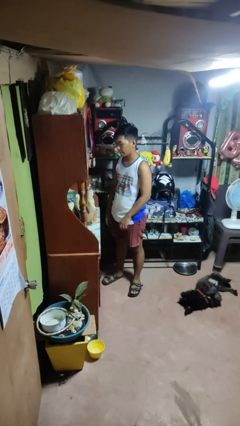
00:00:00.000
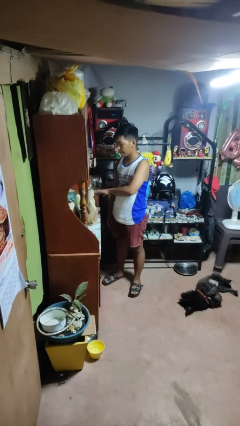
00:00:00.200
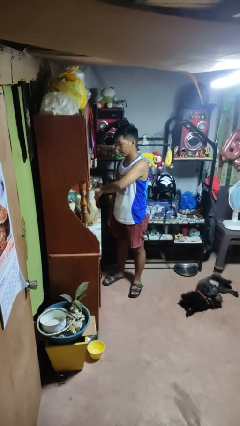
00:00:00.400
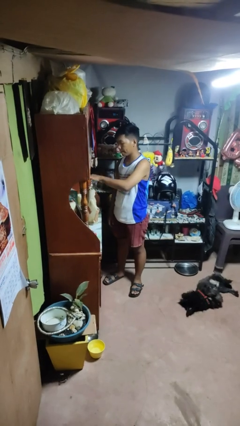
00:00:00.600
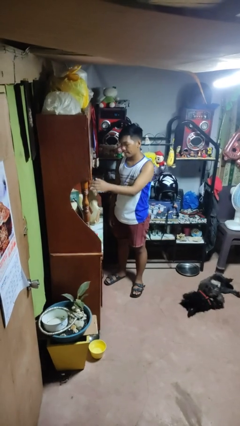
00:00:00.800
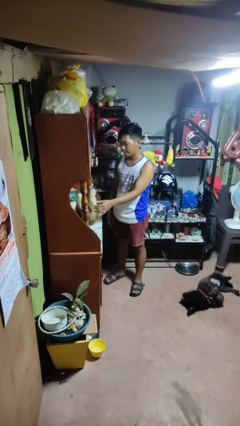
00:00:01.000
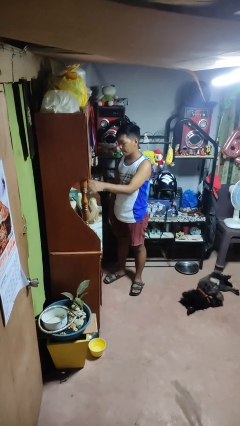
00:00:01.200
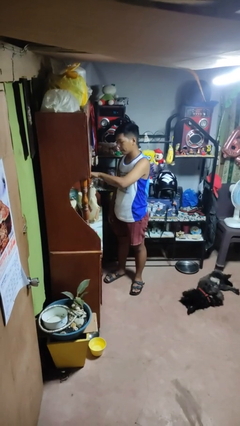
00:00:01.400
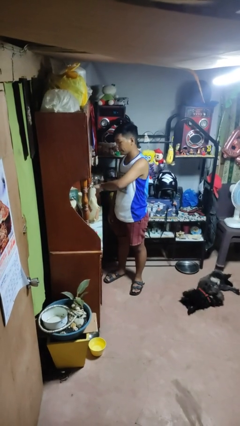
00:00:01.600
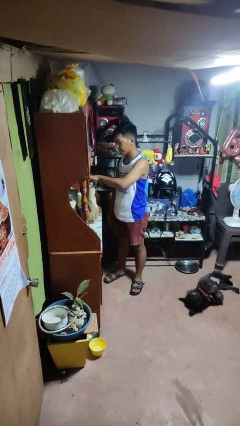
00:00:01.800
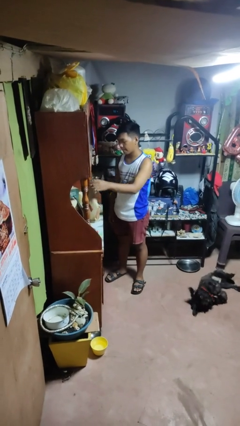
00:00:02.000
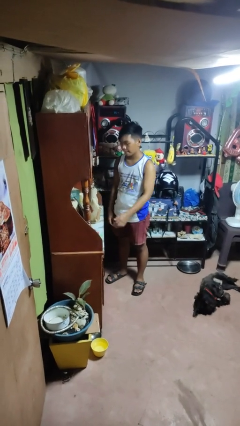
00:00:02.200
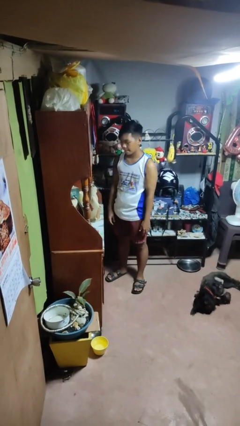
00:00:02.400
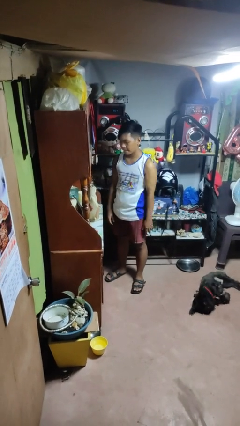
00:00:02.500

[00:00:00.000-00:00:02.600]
person waves hand over object

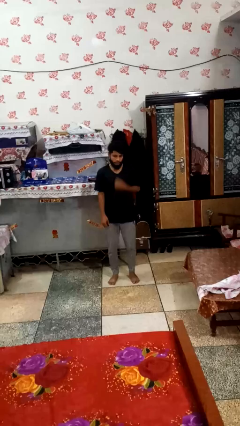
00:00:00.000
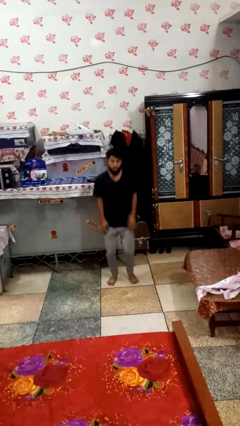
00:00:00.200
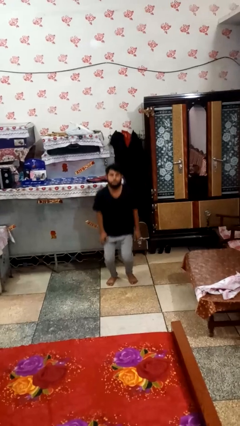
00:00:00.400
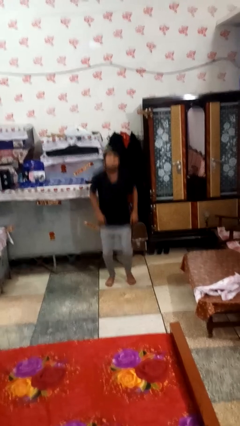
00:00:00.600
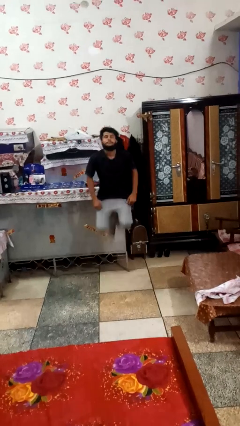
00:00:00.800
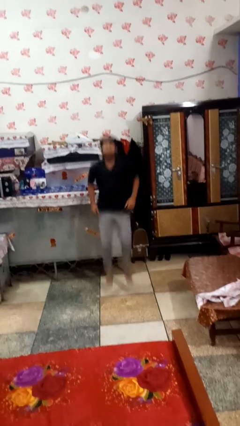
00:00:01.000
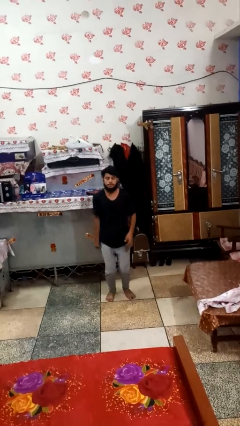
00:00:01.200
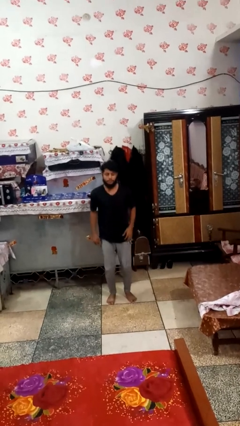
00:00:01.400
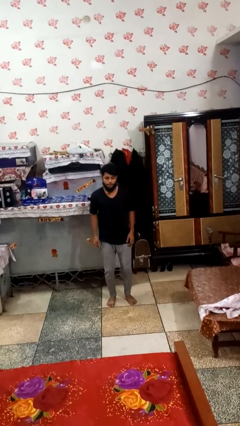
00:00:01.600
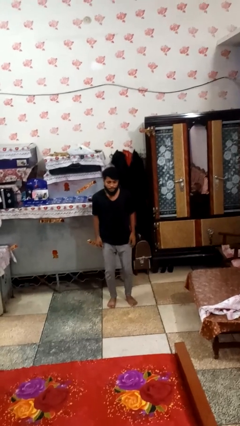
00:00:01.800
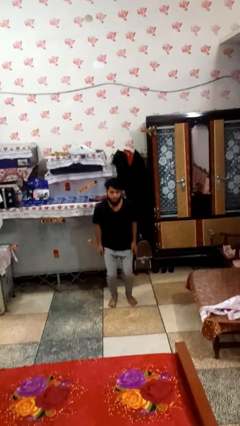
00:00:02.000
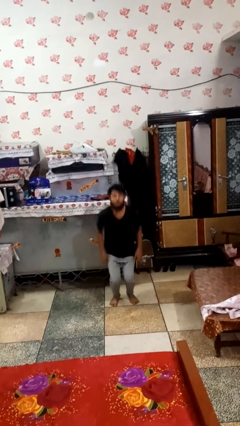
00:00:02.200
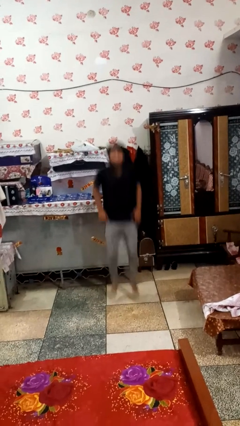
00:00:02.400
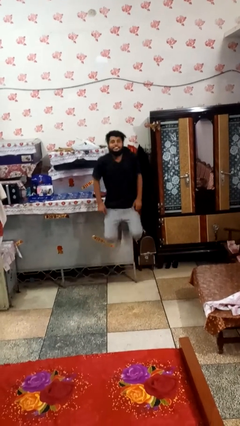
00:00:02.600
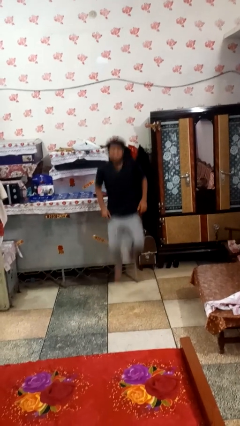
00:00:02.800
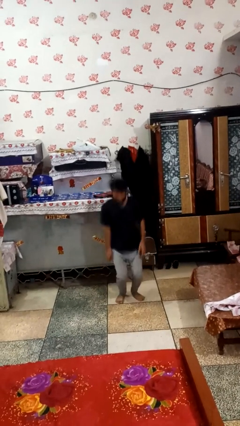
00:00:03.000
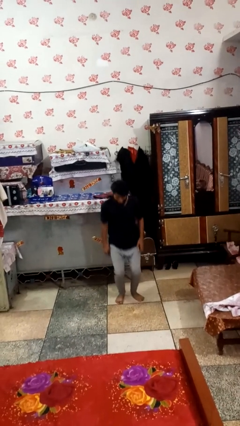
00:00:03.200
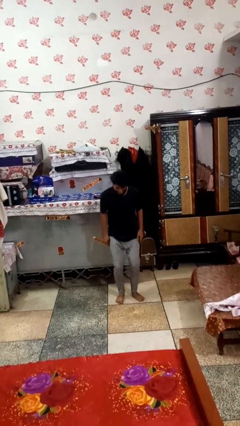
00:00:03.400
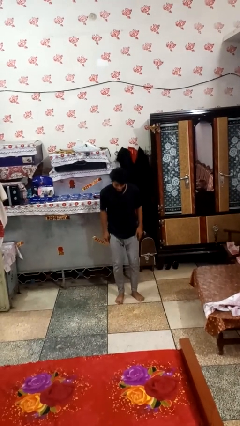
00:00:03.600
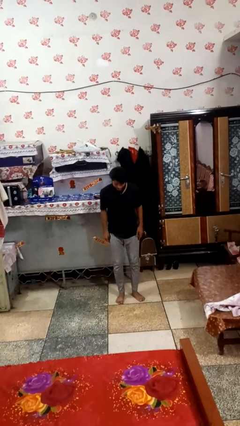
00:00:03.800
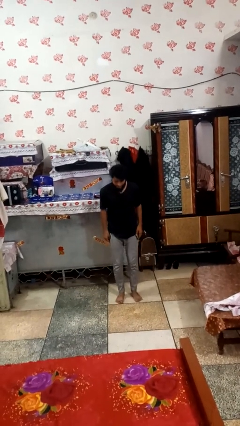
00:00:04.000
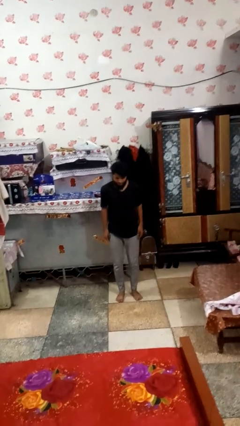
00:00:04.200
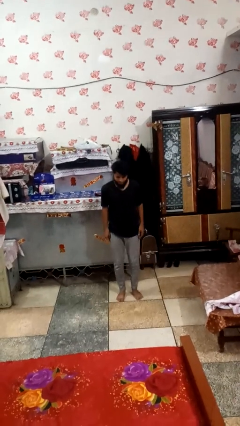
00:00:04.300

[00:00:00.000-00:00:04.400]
person jumps

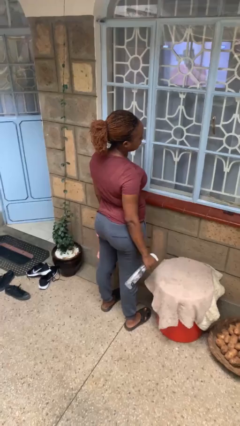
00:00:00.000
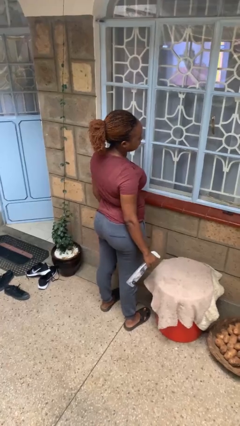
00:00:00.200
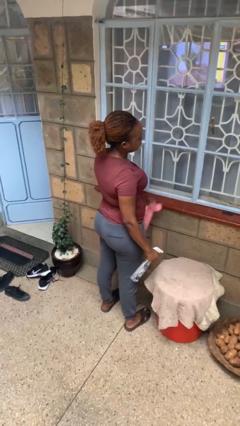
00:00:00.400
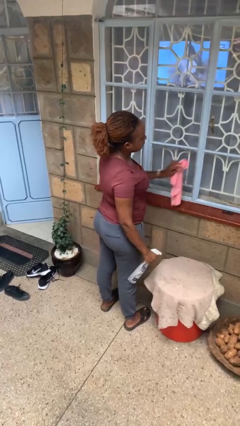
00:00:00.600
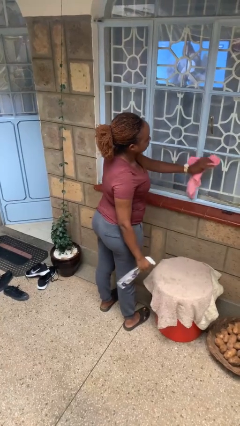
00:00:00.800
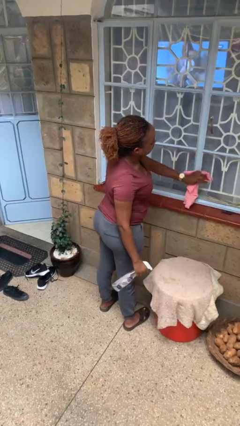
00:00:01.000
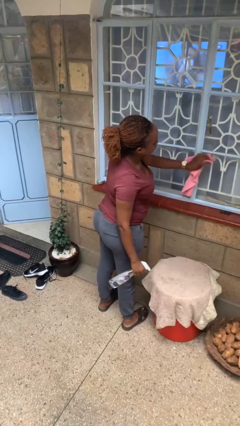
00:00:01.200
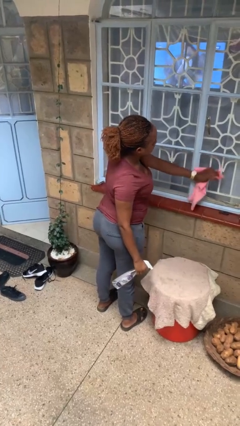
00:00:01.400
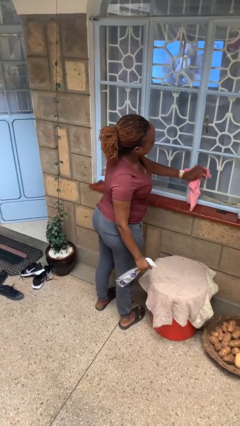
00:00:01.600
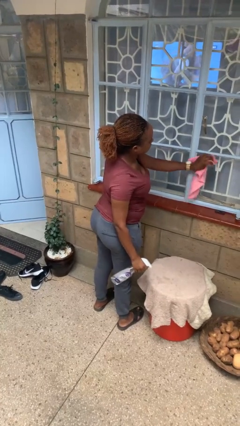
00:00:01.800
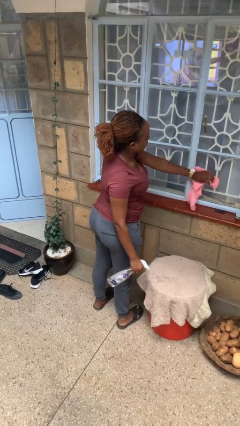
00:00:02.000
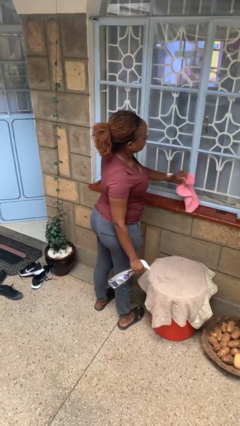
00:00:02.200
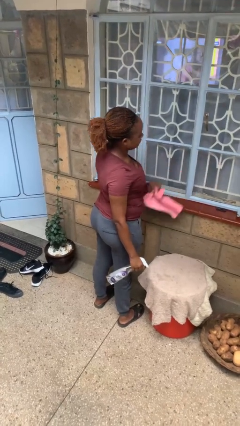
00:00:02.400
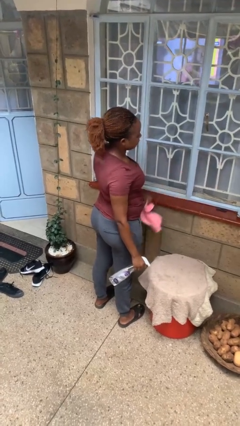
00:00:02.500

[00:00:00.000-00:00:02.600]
person washes window

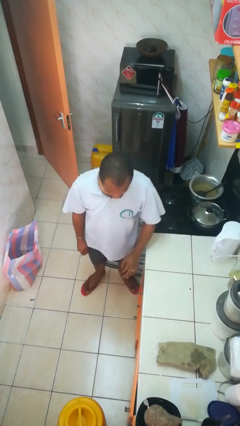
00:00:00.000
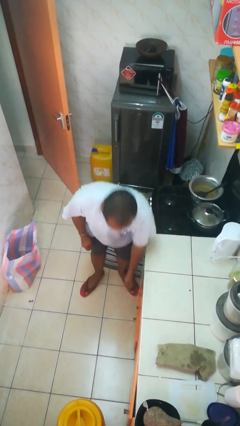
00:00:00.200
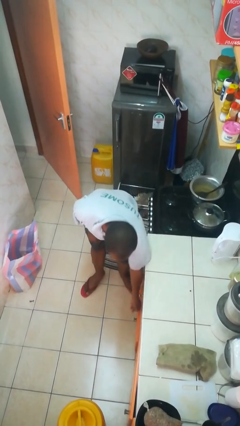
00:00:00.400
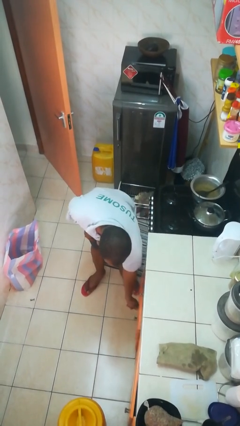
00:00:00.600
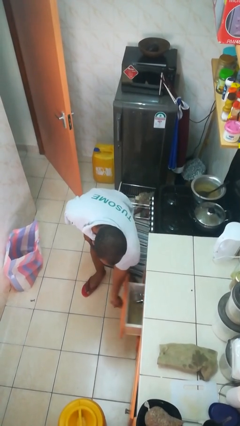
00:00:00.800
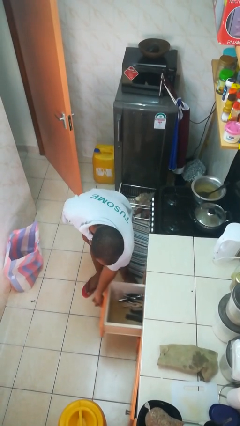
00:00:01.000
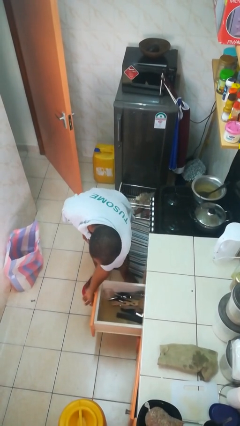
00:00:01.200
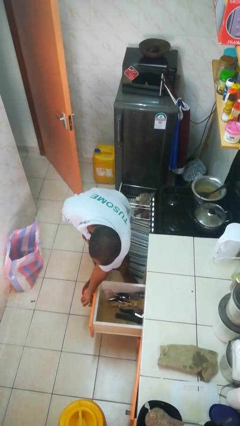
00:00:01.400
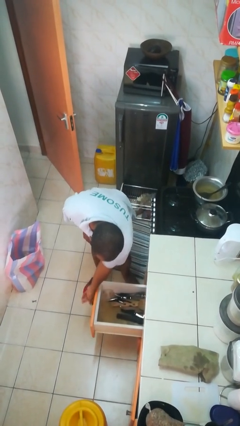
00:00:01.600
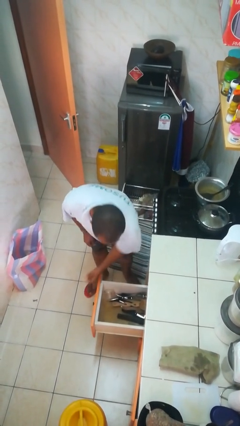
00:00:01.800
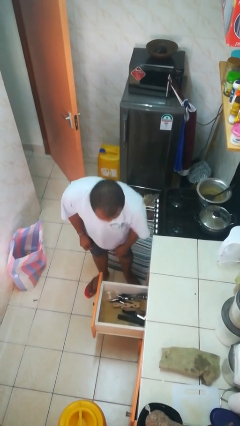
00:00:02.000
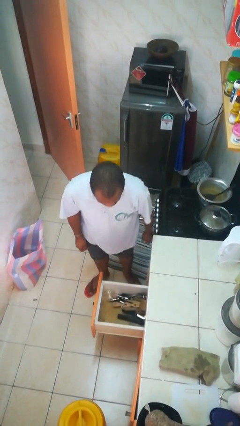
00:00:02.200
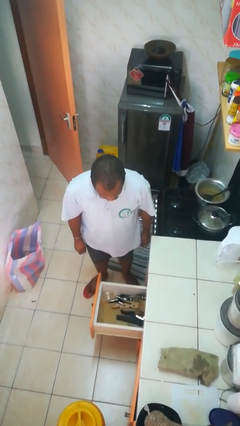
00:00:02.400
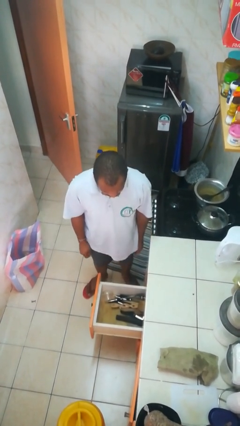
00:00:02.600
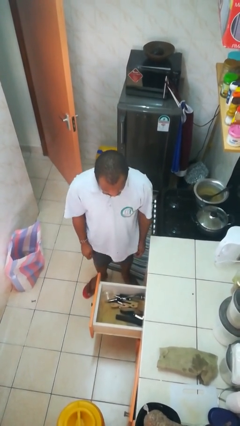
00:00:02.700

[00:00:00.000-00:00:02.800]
person opens kitchen drawer

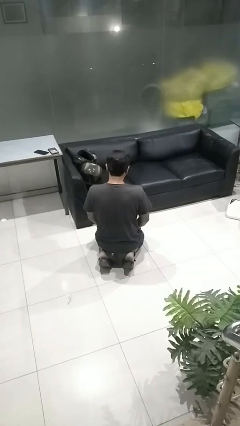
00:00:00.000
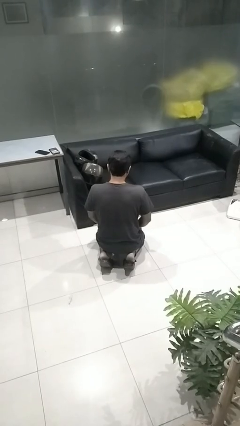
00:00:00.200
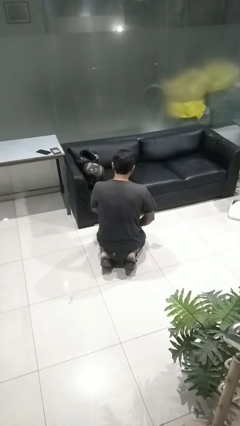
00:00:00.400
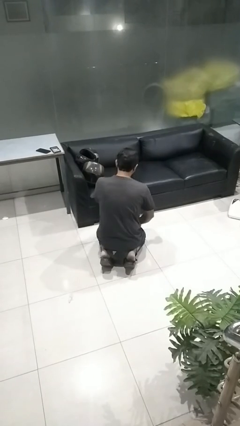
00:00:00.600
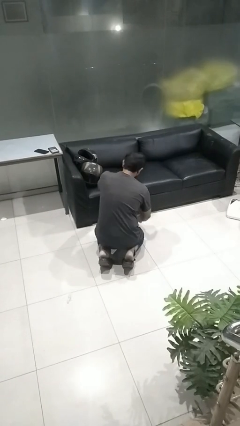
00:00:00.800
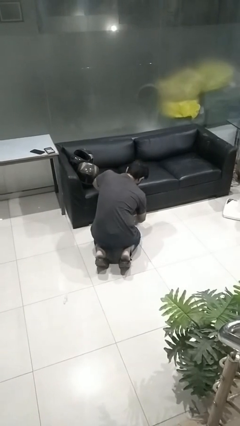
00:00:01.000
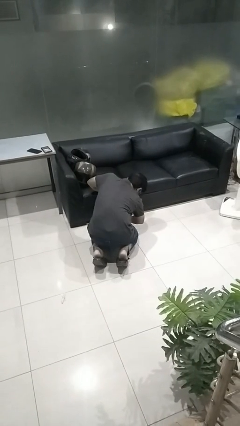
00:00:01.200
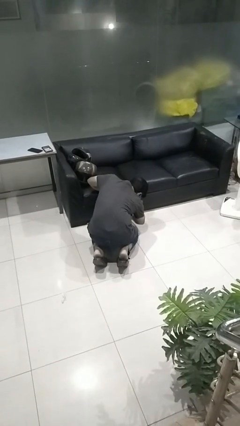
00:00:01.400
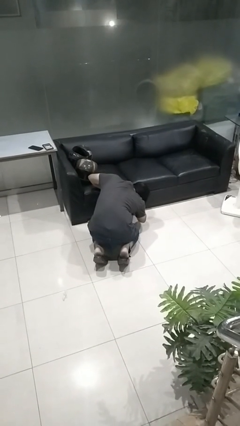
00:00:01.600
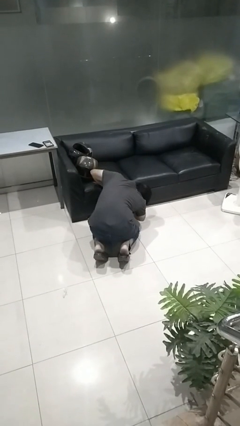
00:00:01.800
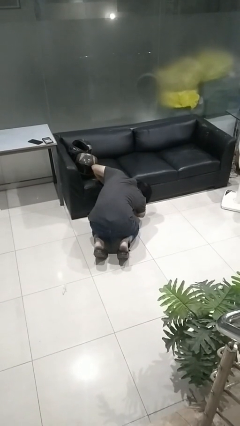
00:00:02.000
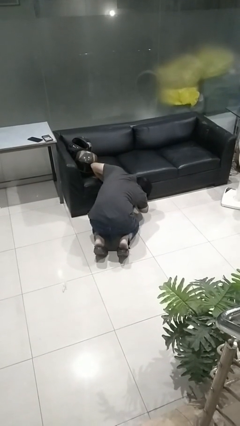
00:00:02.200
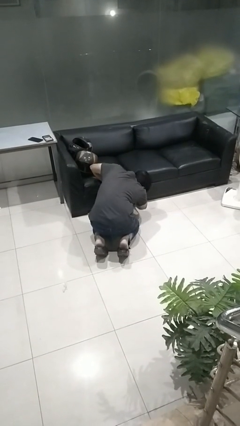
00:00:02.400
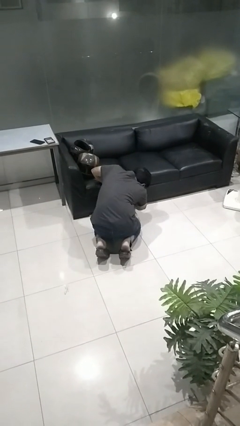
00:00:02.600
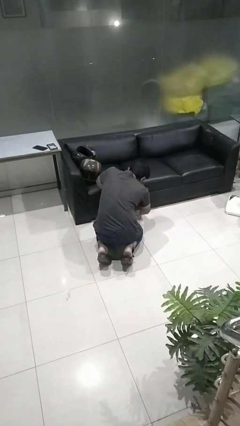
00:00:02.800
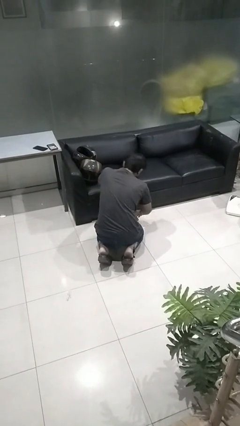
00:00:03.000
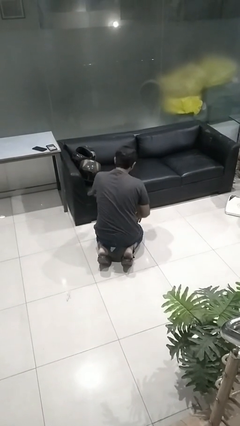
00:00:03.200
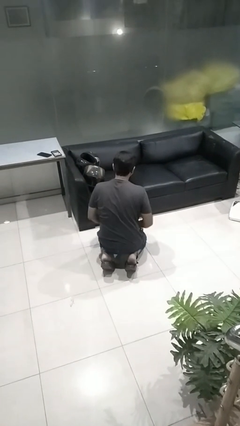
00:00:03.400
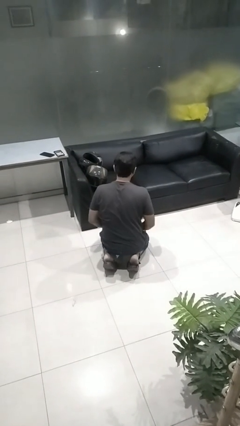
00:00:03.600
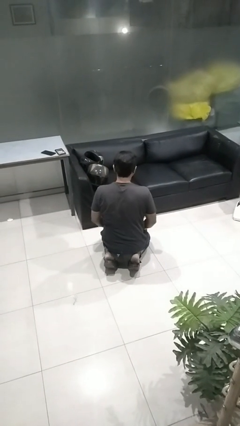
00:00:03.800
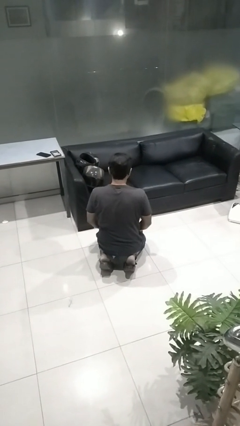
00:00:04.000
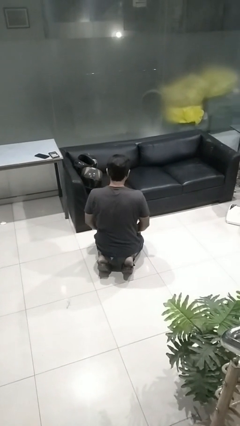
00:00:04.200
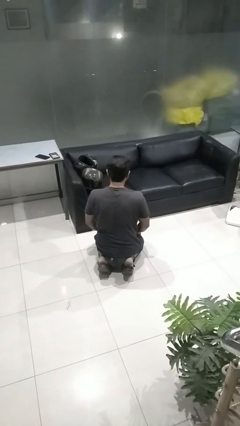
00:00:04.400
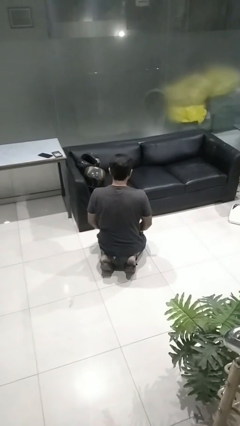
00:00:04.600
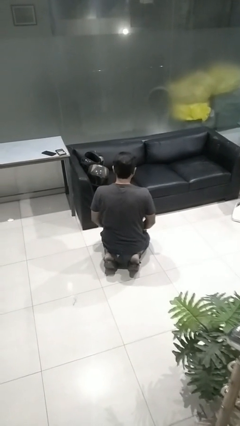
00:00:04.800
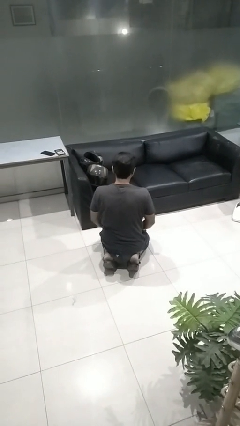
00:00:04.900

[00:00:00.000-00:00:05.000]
person searches under couch

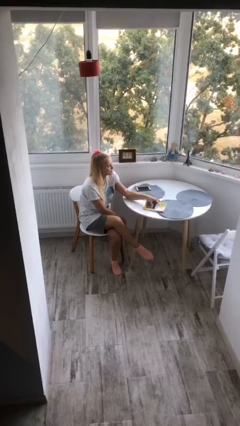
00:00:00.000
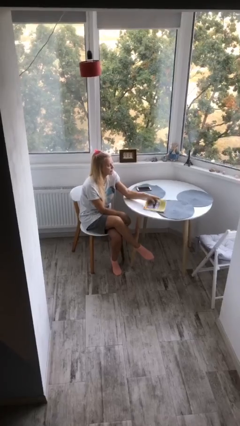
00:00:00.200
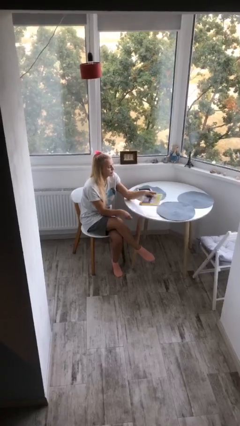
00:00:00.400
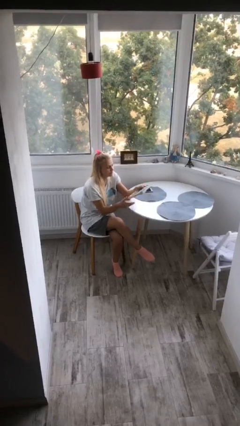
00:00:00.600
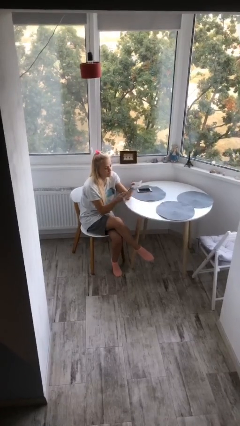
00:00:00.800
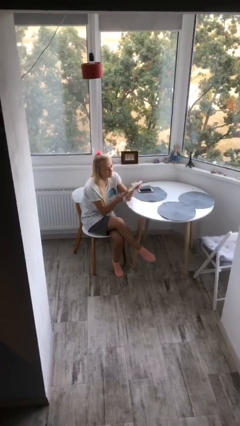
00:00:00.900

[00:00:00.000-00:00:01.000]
person picks up object from table
